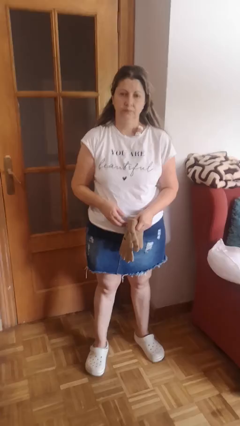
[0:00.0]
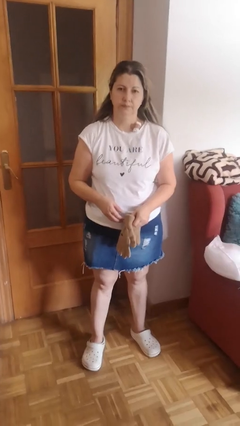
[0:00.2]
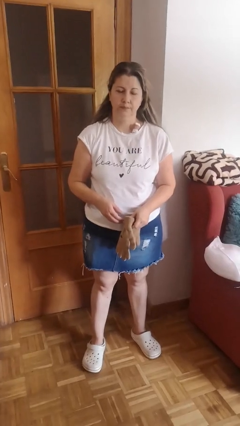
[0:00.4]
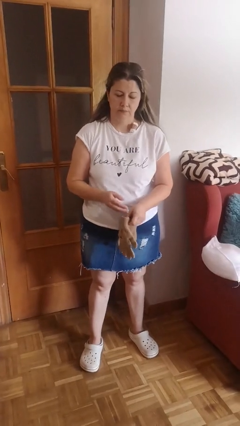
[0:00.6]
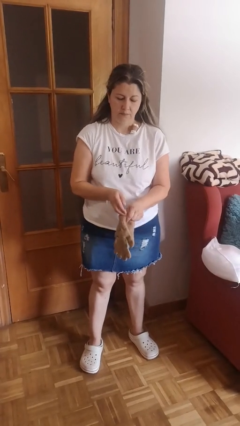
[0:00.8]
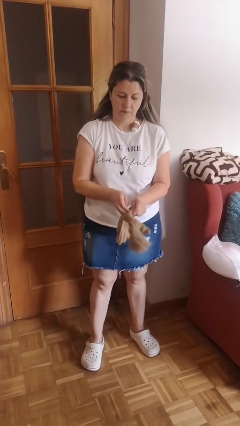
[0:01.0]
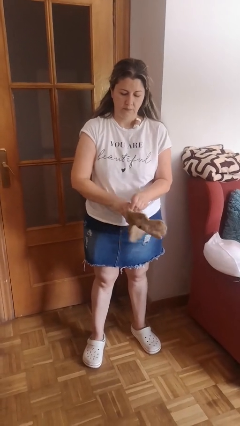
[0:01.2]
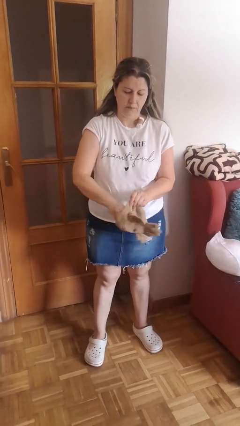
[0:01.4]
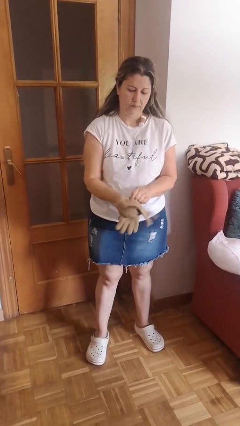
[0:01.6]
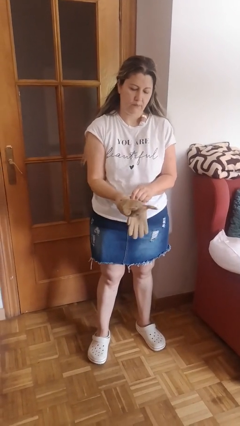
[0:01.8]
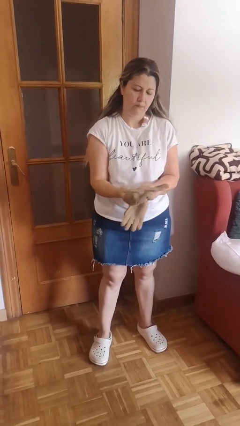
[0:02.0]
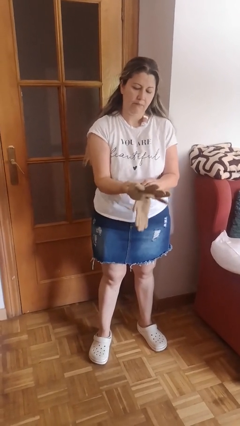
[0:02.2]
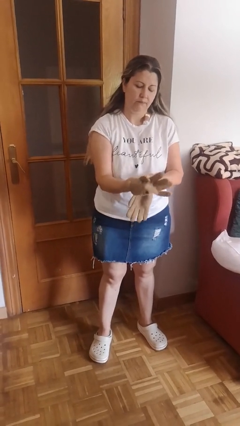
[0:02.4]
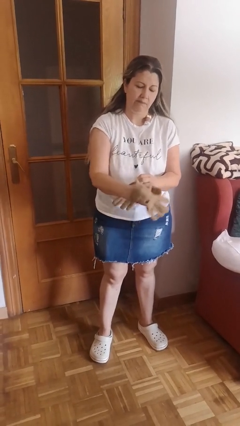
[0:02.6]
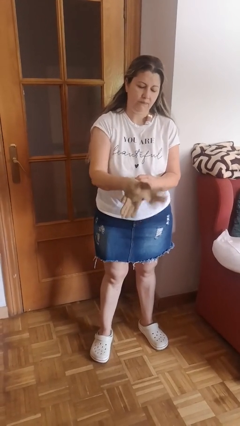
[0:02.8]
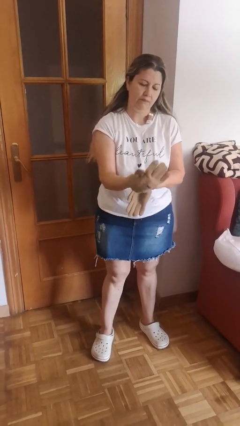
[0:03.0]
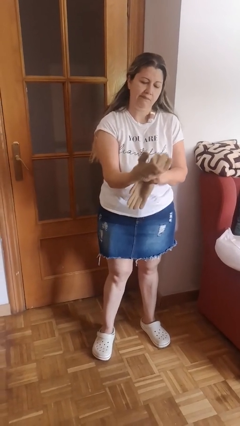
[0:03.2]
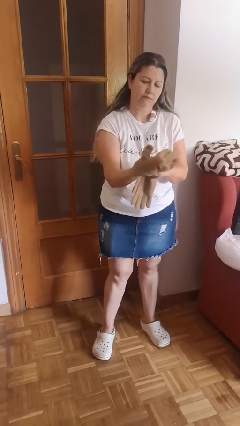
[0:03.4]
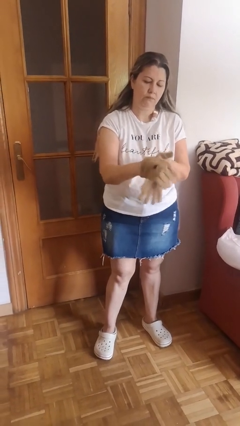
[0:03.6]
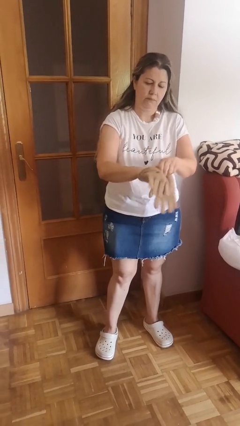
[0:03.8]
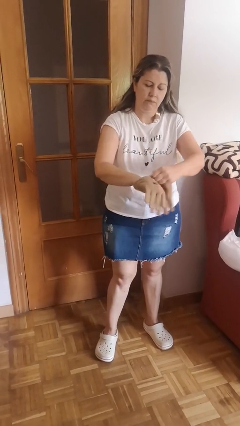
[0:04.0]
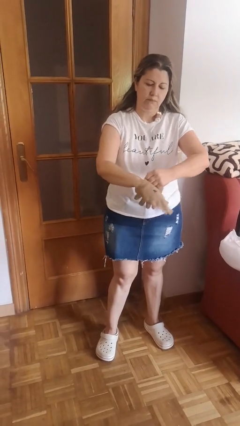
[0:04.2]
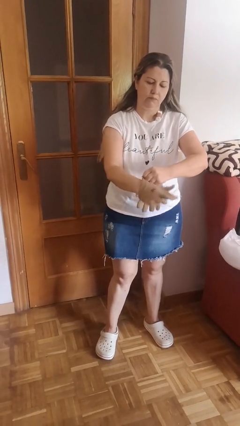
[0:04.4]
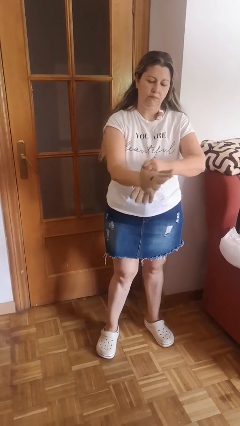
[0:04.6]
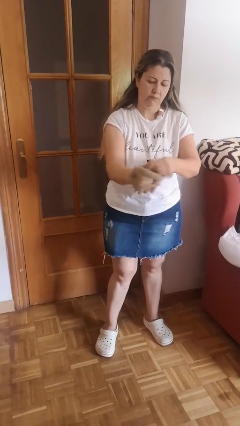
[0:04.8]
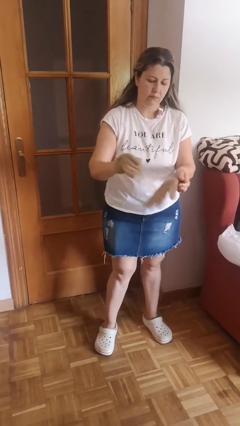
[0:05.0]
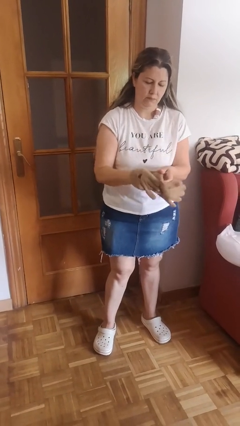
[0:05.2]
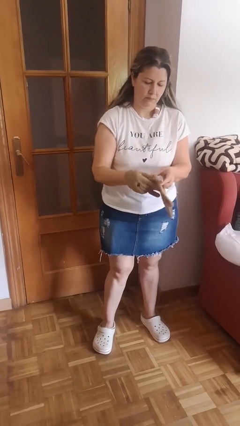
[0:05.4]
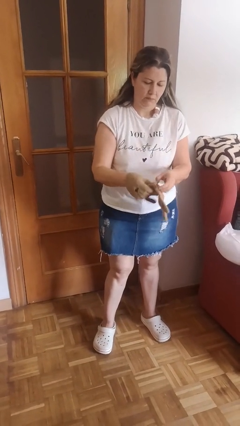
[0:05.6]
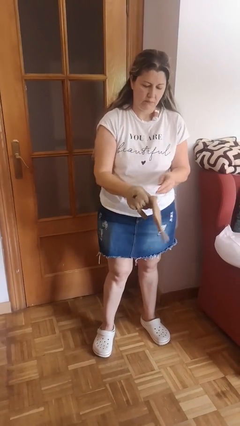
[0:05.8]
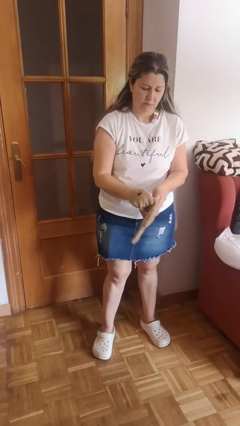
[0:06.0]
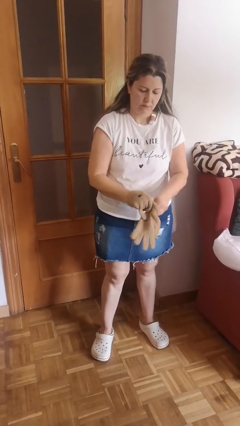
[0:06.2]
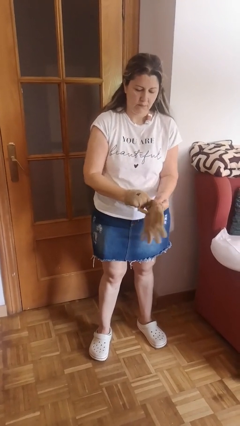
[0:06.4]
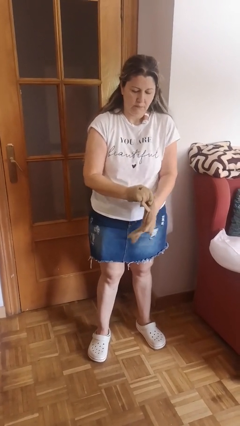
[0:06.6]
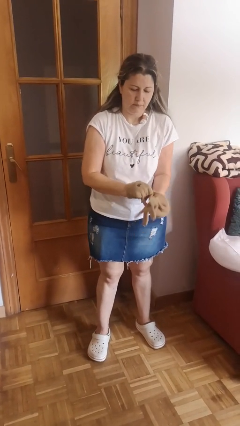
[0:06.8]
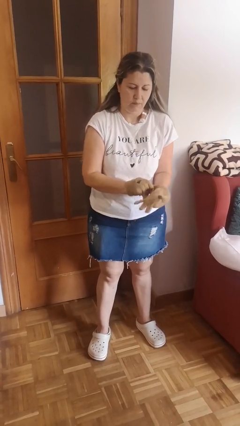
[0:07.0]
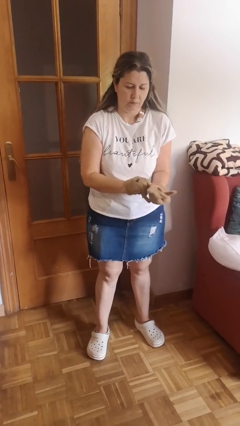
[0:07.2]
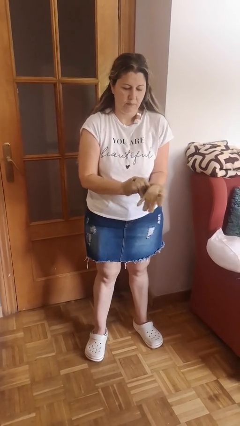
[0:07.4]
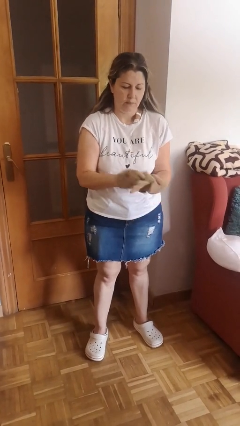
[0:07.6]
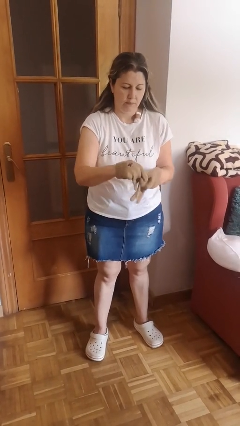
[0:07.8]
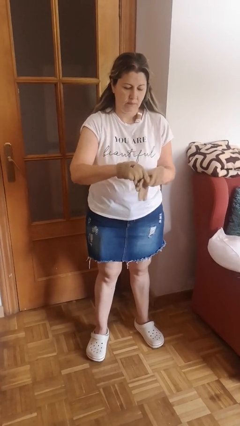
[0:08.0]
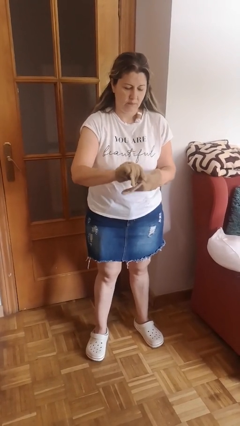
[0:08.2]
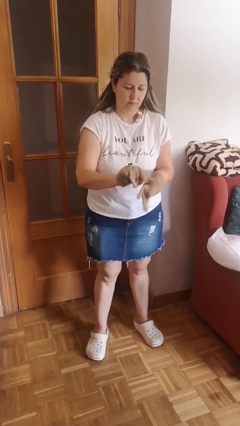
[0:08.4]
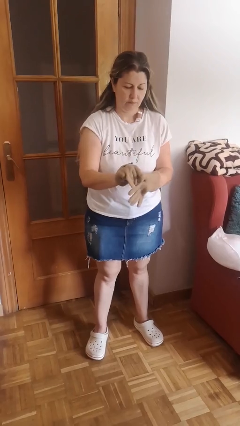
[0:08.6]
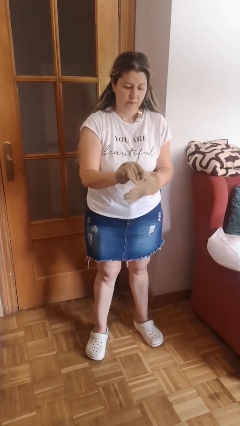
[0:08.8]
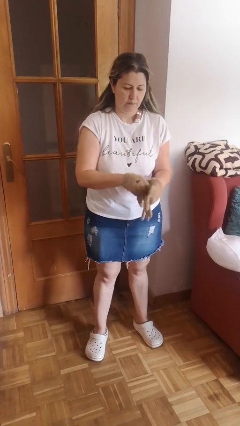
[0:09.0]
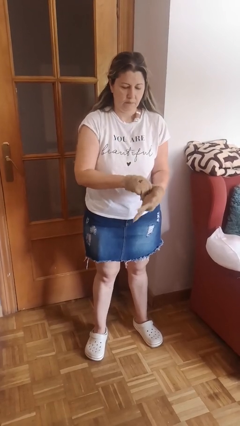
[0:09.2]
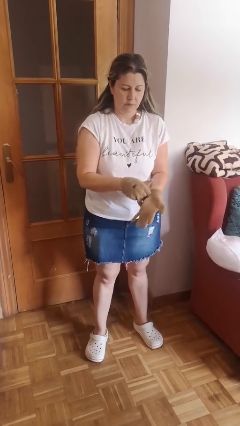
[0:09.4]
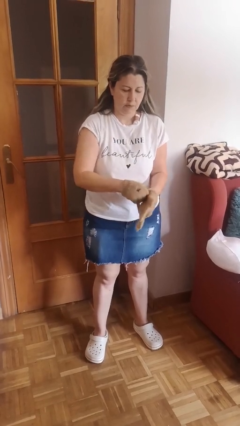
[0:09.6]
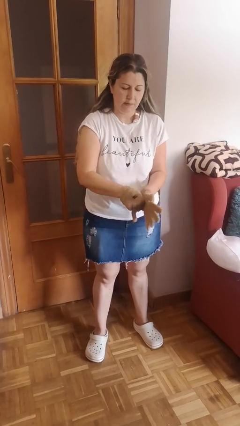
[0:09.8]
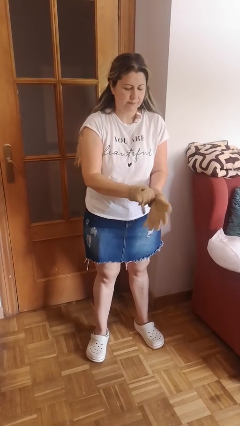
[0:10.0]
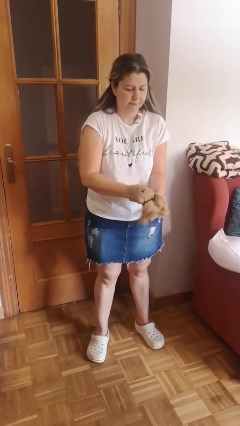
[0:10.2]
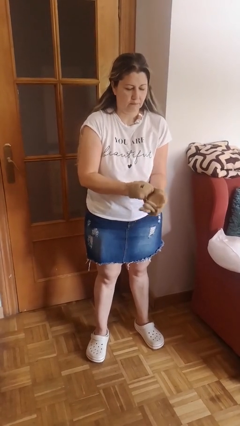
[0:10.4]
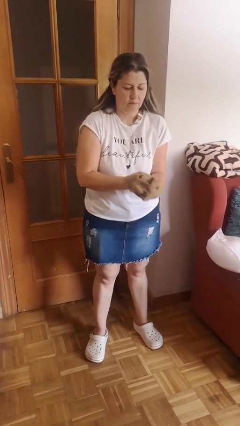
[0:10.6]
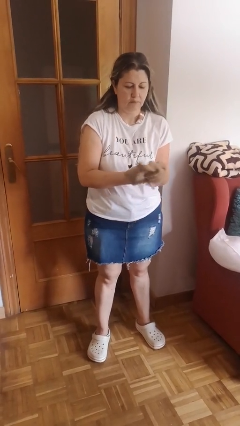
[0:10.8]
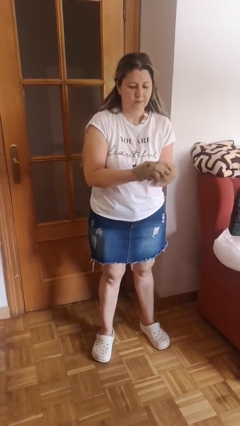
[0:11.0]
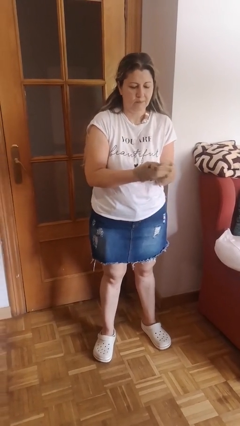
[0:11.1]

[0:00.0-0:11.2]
person puts on gloves

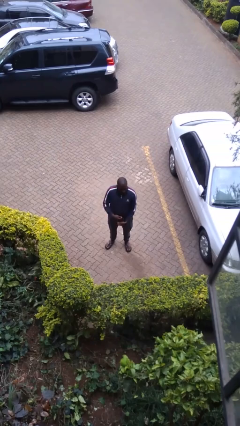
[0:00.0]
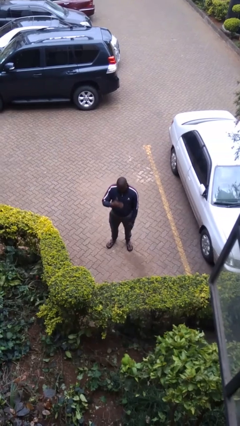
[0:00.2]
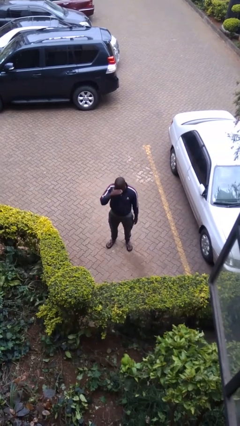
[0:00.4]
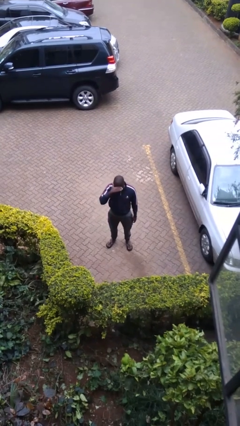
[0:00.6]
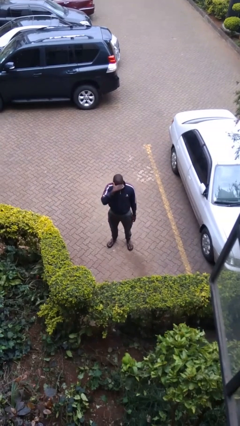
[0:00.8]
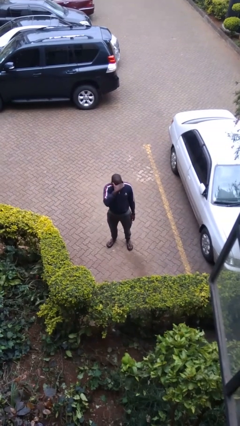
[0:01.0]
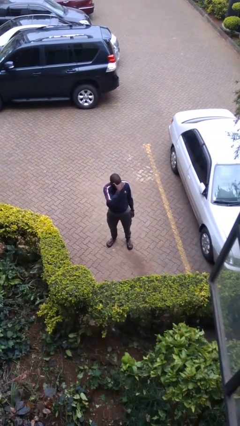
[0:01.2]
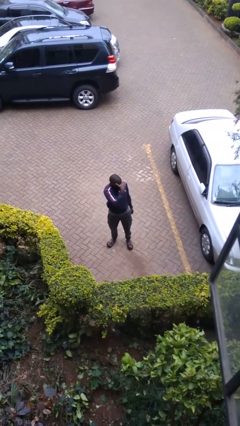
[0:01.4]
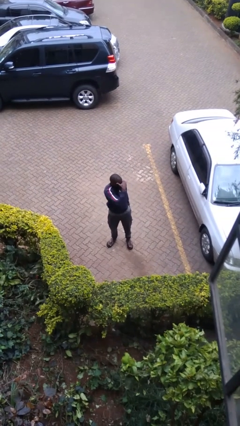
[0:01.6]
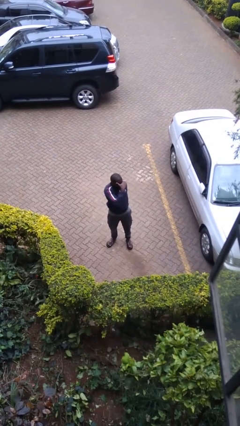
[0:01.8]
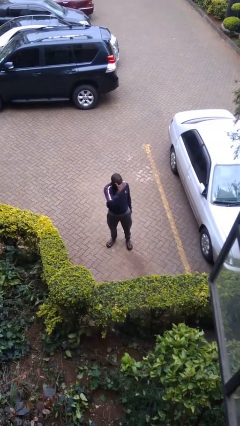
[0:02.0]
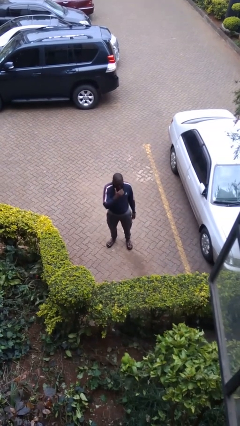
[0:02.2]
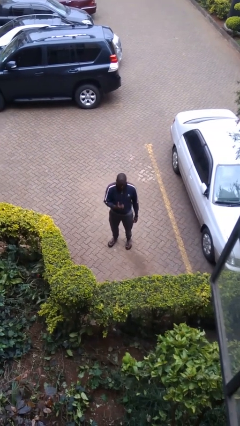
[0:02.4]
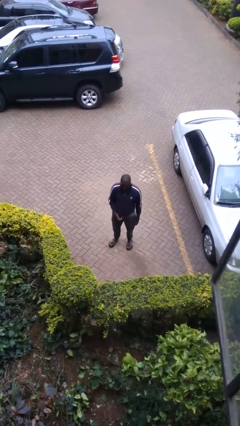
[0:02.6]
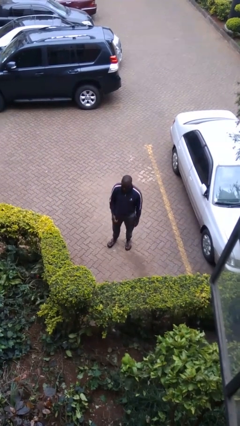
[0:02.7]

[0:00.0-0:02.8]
person shades eyes

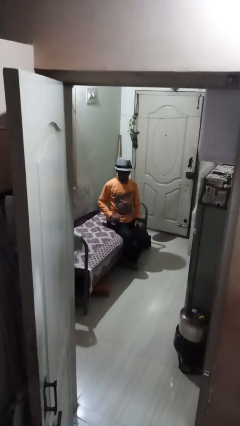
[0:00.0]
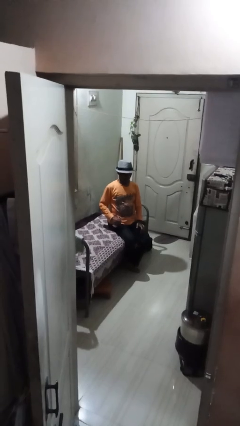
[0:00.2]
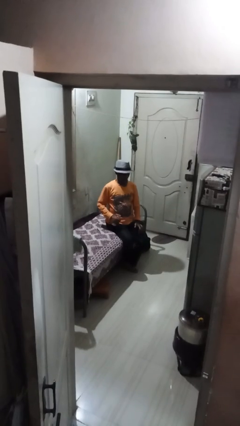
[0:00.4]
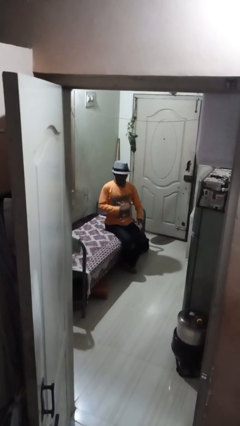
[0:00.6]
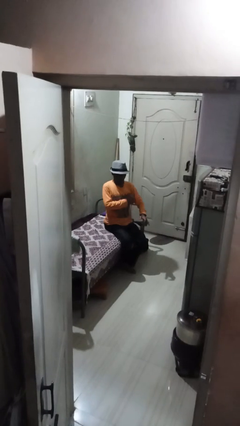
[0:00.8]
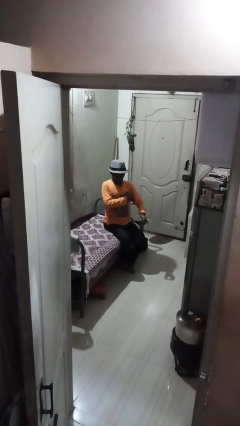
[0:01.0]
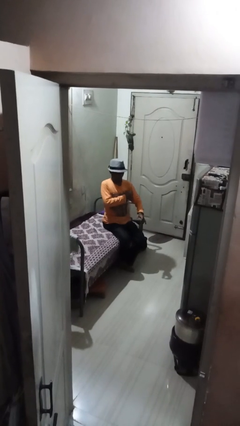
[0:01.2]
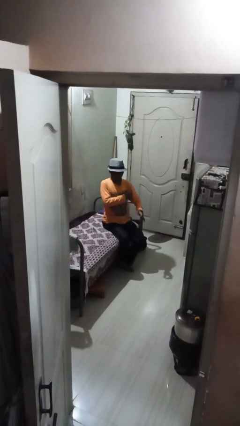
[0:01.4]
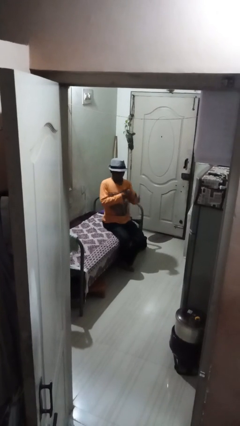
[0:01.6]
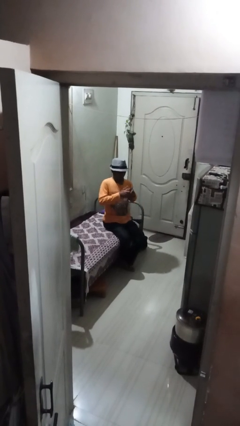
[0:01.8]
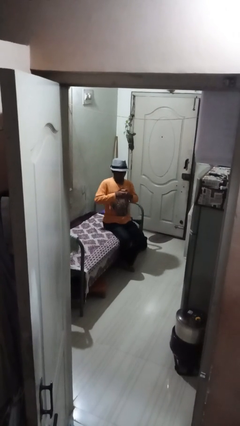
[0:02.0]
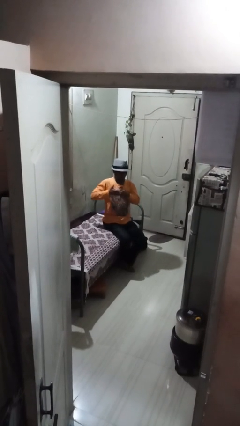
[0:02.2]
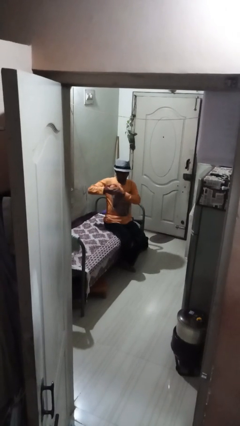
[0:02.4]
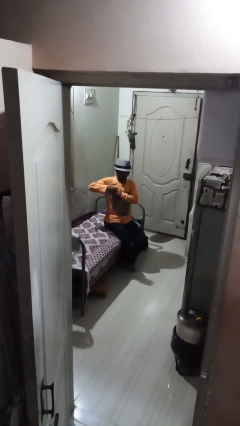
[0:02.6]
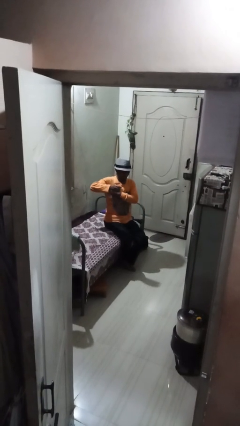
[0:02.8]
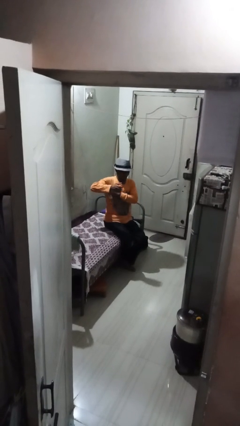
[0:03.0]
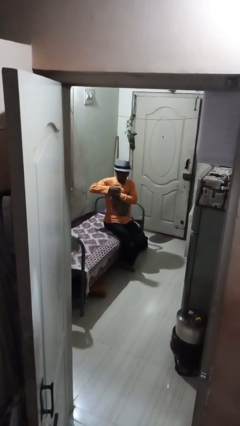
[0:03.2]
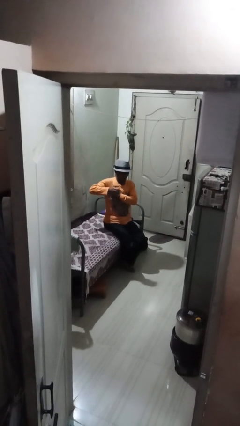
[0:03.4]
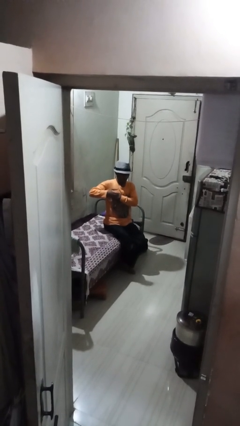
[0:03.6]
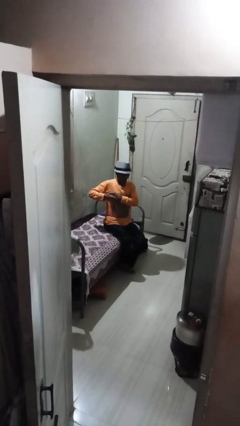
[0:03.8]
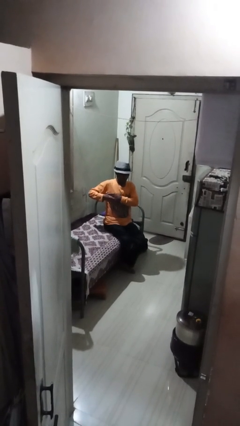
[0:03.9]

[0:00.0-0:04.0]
person applies deodorant
